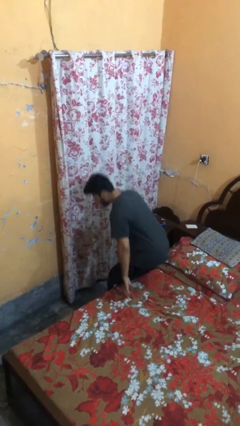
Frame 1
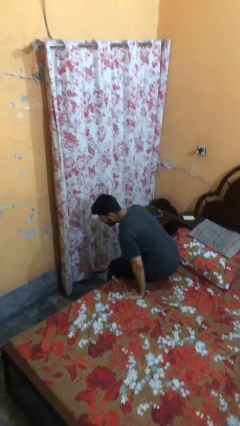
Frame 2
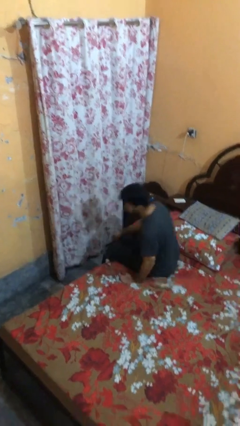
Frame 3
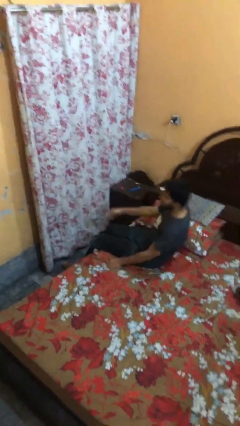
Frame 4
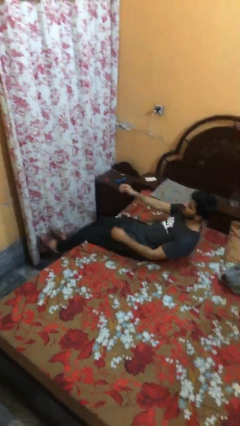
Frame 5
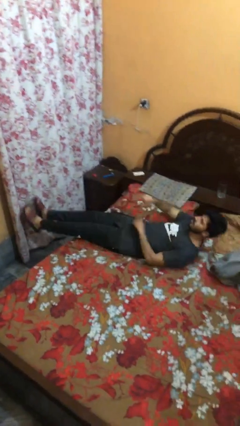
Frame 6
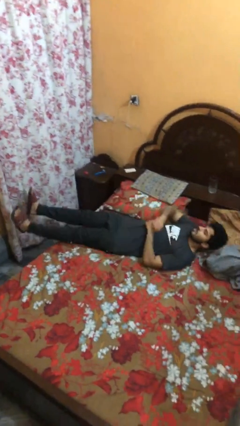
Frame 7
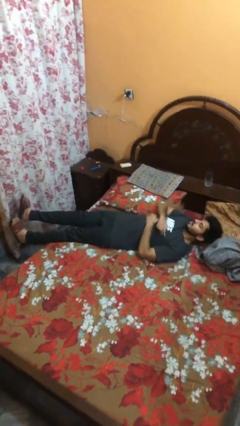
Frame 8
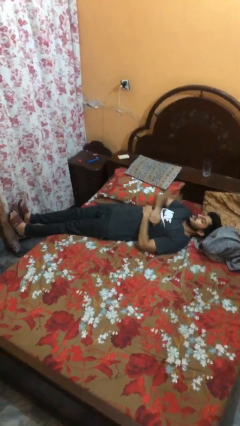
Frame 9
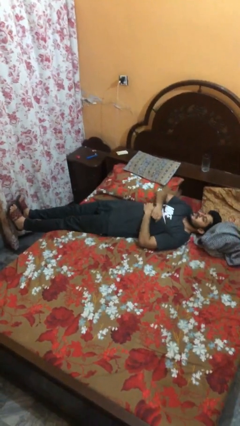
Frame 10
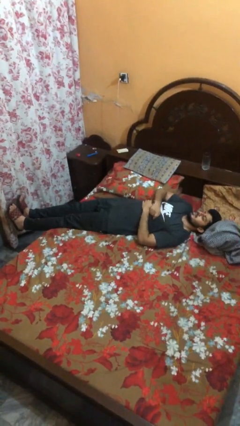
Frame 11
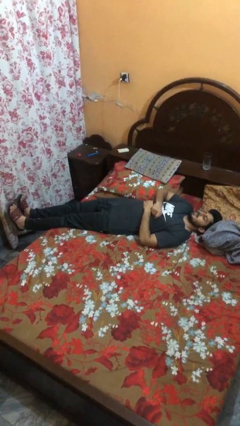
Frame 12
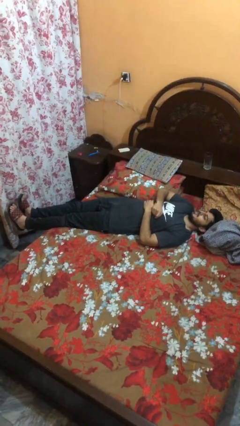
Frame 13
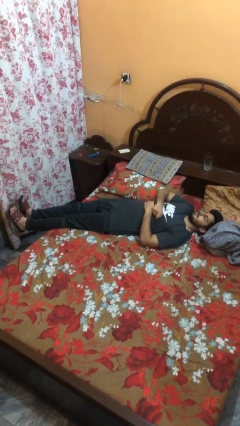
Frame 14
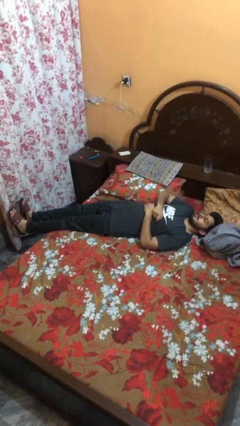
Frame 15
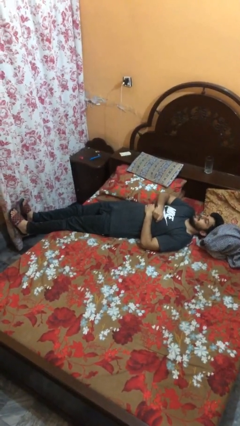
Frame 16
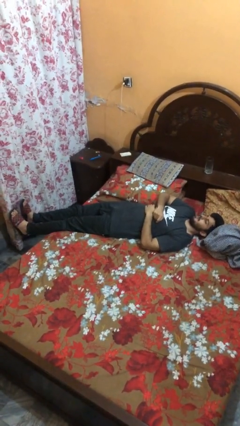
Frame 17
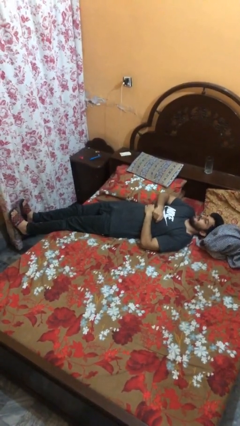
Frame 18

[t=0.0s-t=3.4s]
person lies down on bed

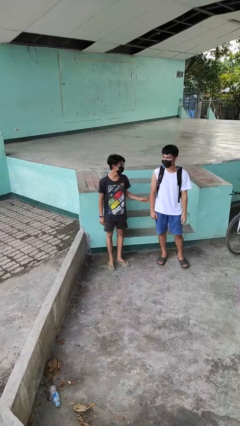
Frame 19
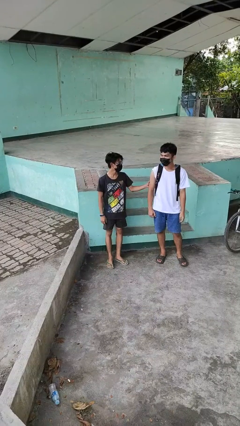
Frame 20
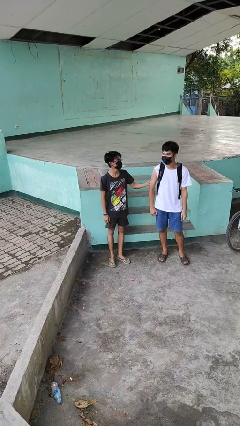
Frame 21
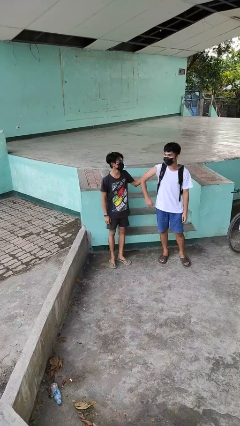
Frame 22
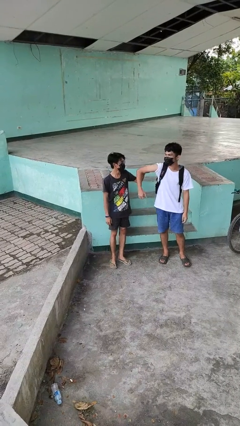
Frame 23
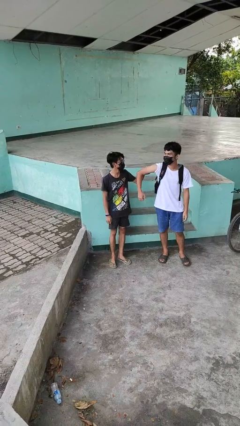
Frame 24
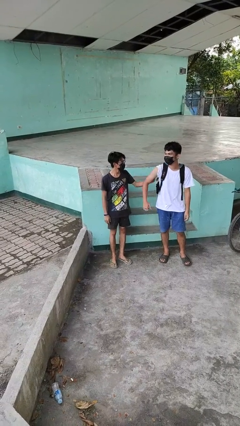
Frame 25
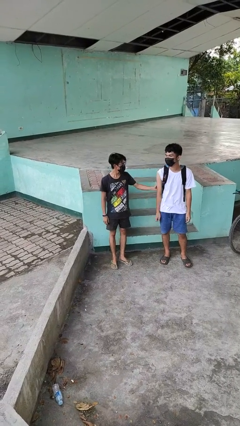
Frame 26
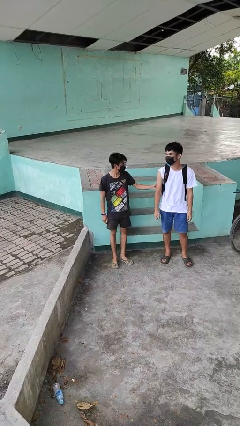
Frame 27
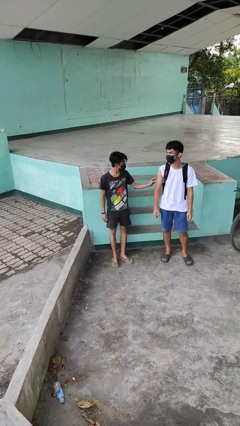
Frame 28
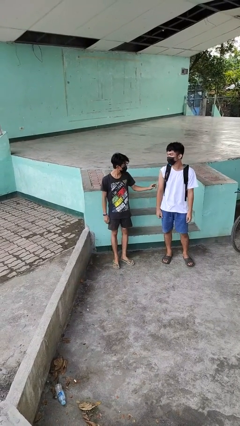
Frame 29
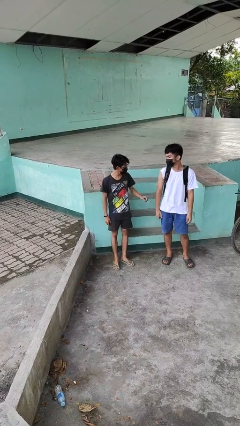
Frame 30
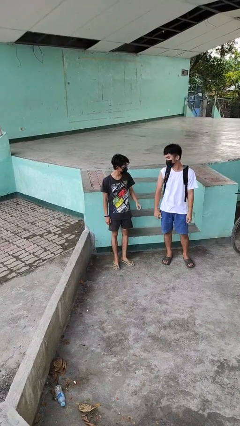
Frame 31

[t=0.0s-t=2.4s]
person grabs person by bicep

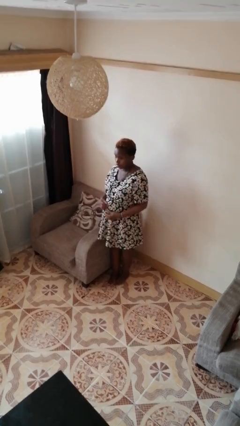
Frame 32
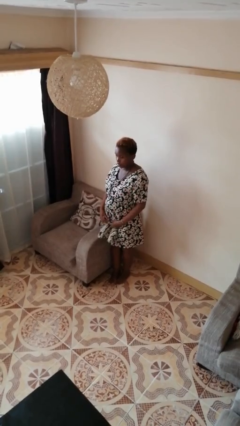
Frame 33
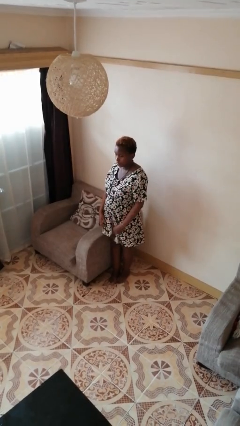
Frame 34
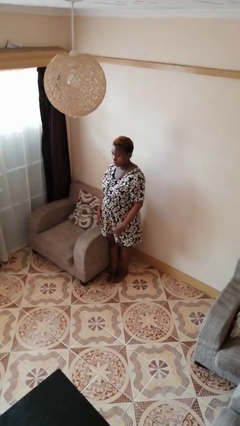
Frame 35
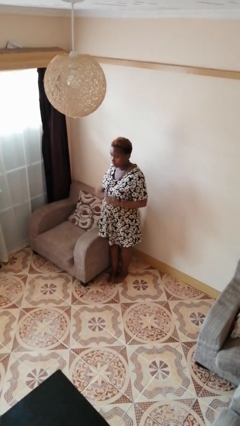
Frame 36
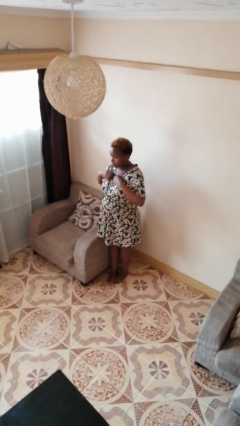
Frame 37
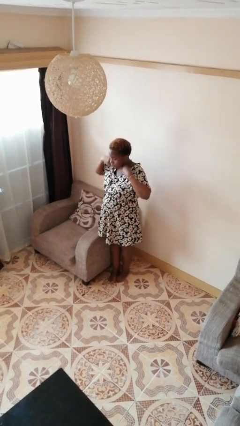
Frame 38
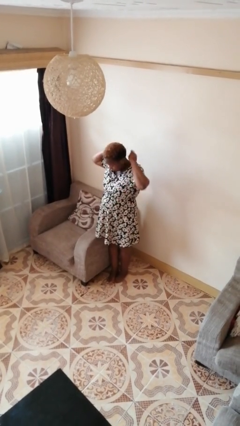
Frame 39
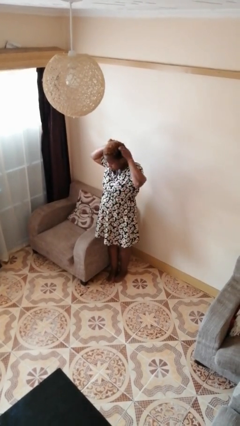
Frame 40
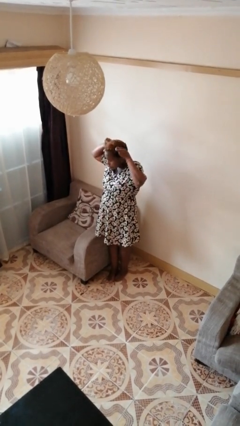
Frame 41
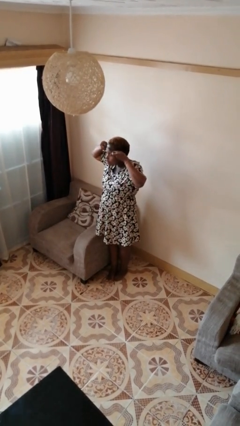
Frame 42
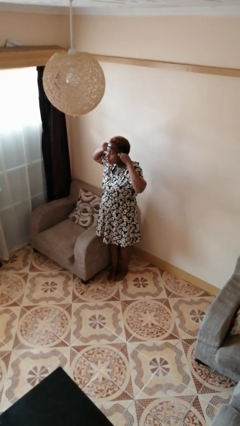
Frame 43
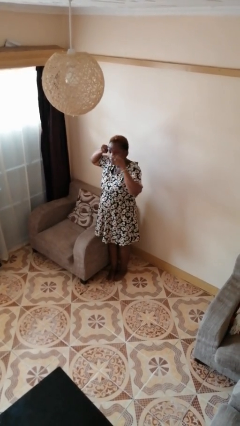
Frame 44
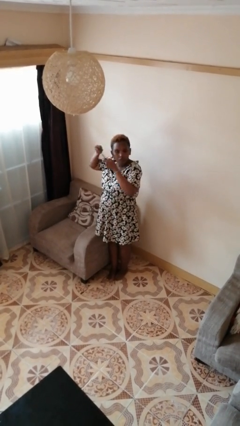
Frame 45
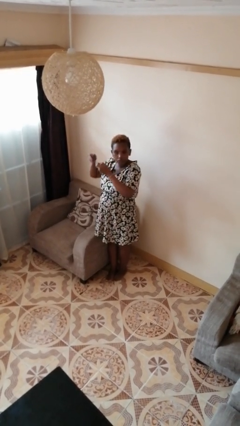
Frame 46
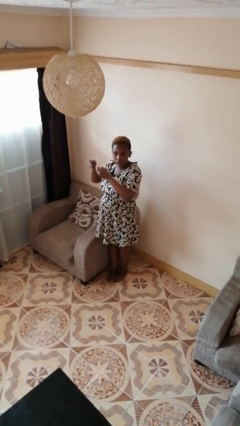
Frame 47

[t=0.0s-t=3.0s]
person takes off necklace

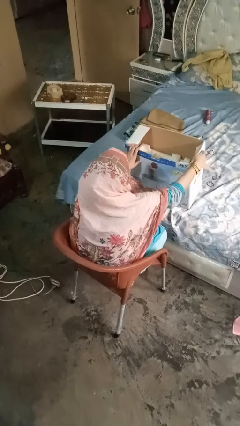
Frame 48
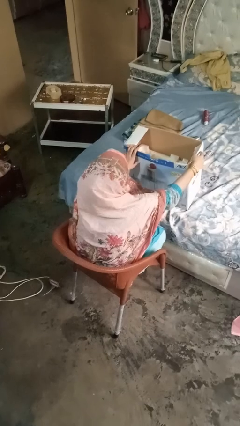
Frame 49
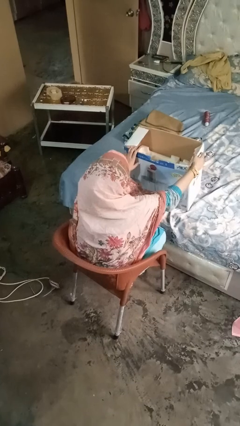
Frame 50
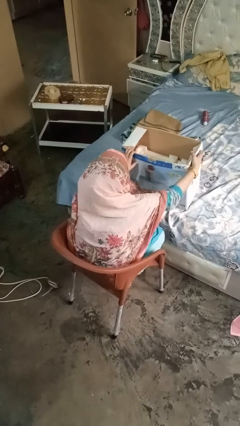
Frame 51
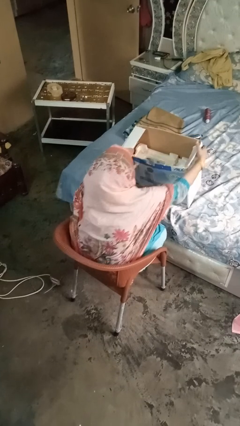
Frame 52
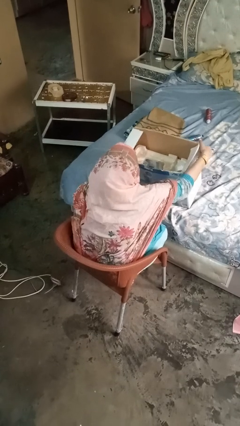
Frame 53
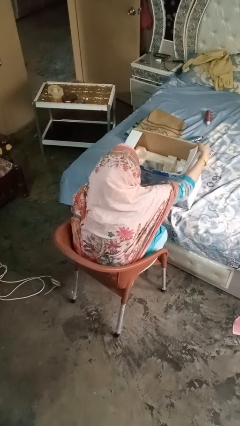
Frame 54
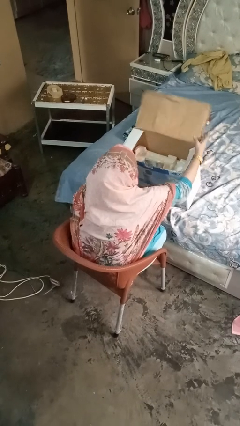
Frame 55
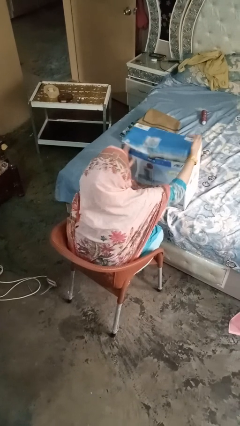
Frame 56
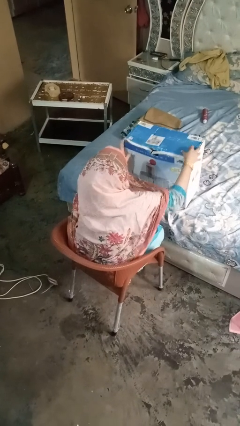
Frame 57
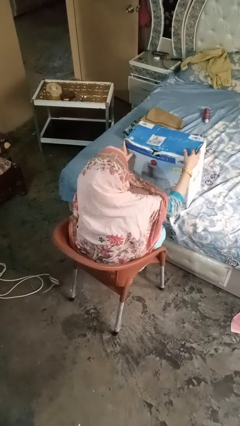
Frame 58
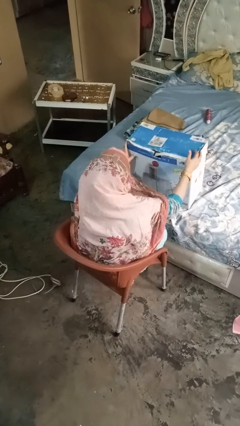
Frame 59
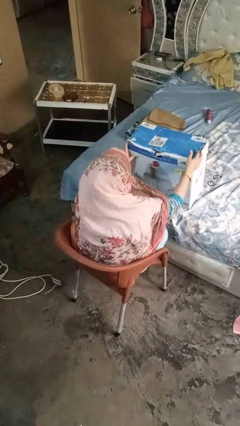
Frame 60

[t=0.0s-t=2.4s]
person closes box

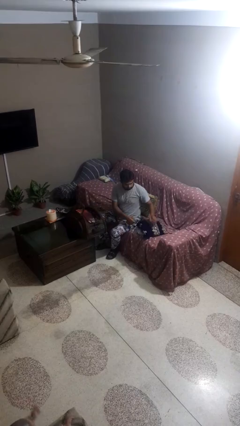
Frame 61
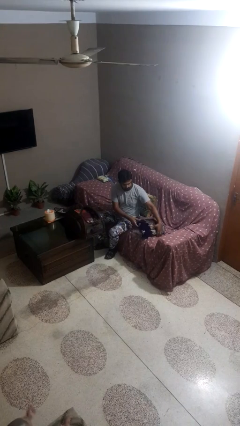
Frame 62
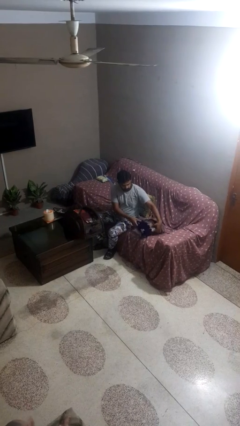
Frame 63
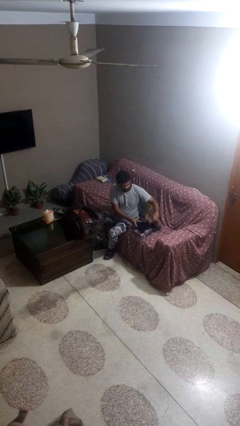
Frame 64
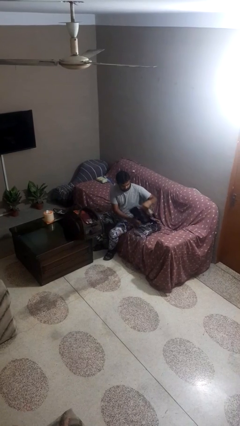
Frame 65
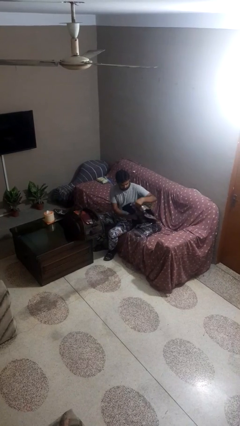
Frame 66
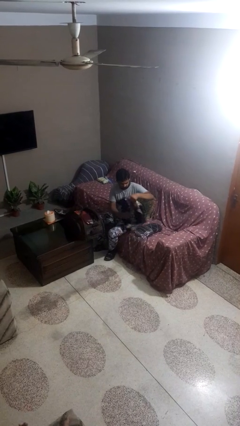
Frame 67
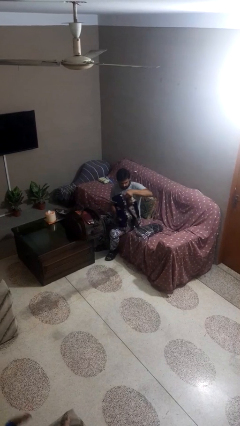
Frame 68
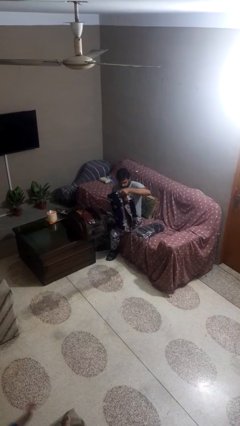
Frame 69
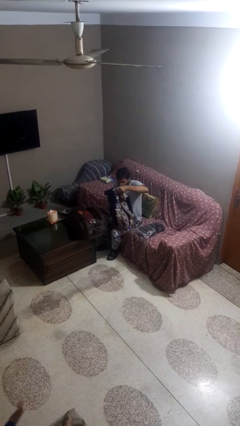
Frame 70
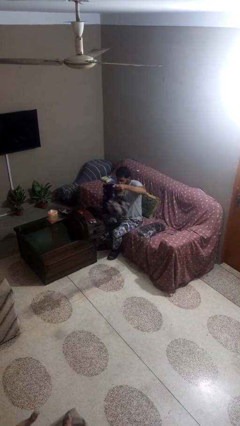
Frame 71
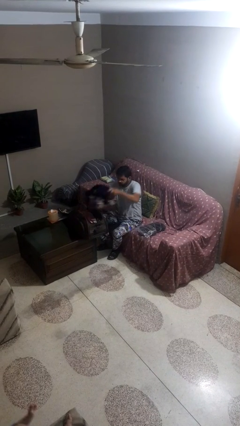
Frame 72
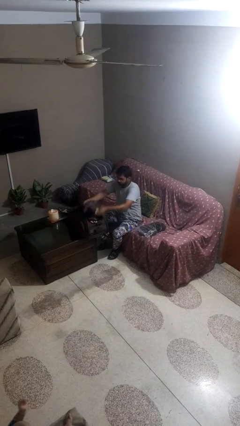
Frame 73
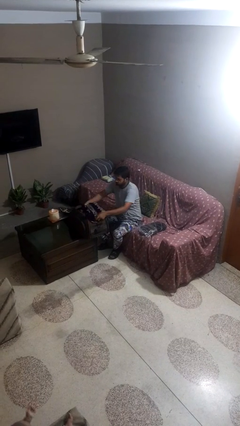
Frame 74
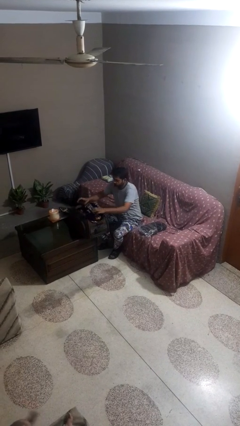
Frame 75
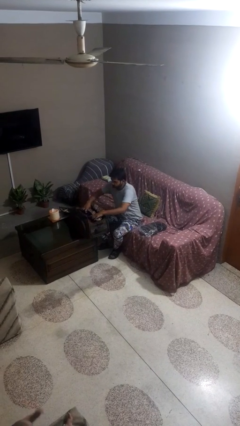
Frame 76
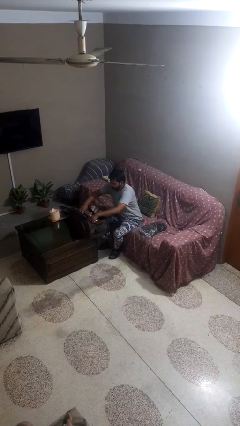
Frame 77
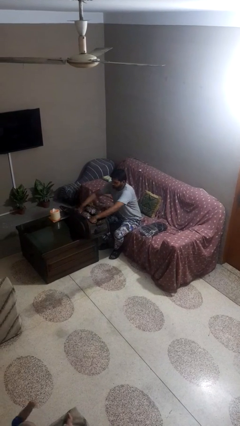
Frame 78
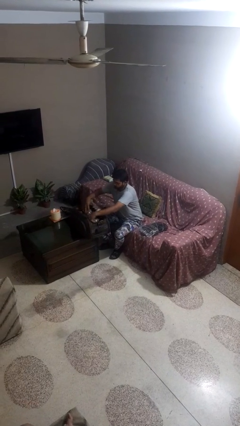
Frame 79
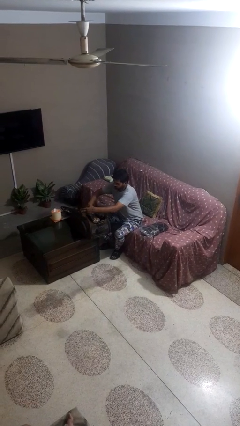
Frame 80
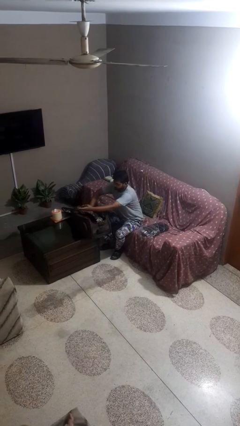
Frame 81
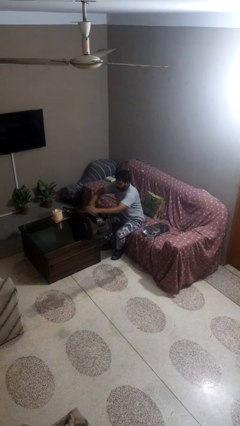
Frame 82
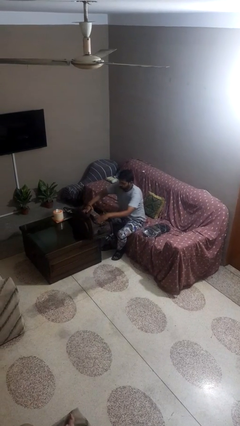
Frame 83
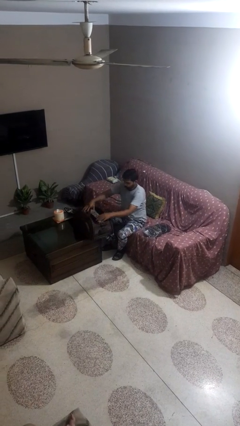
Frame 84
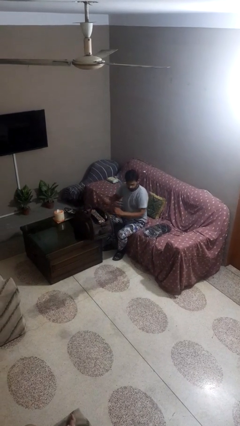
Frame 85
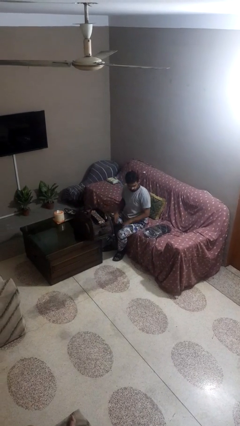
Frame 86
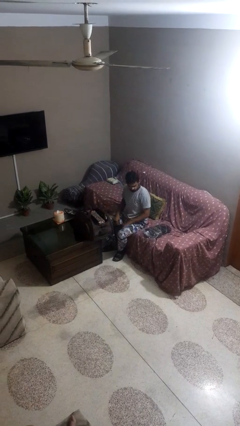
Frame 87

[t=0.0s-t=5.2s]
person loads clothes into suitcase

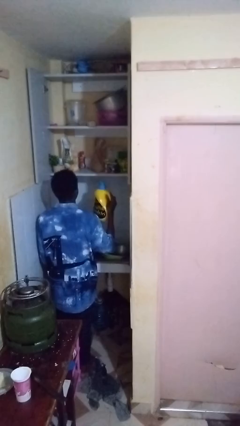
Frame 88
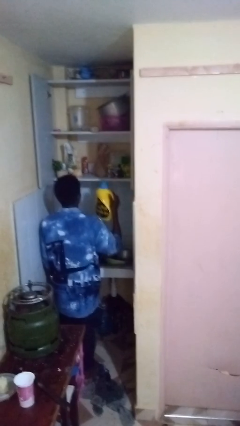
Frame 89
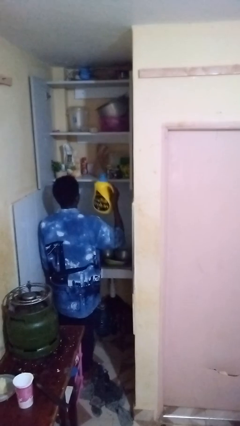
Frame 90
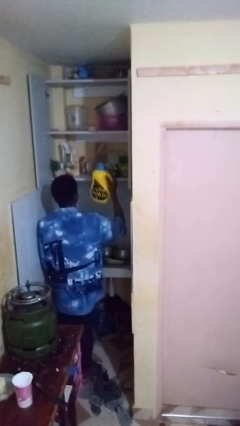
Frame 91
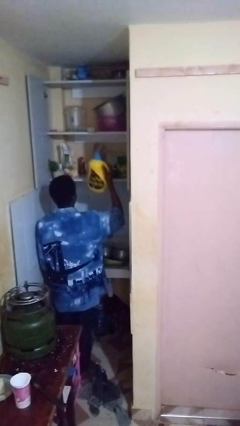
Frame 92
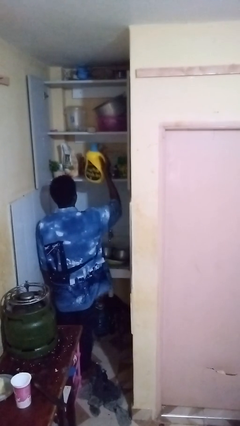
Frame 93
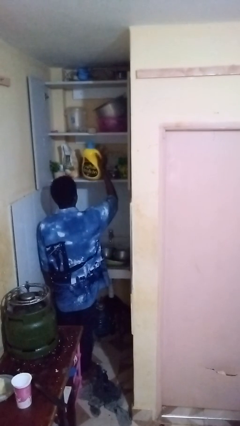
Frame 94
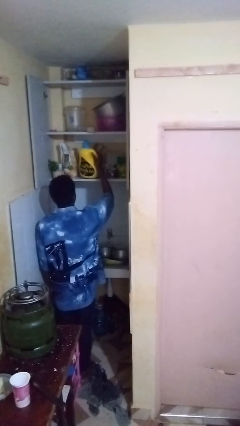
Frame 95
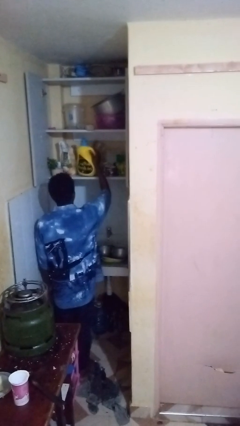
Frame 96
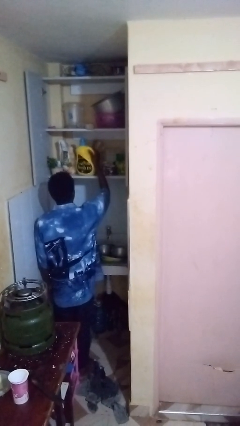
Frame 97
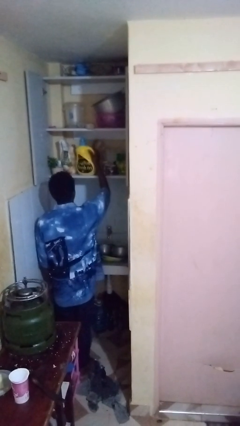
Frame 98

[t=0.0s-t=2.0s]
person puts down object on countertop
